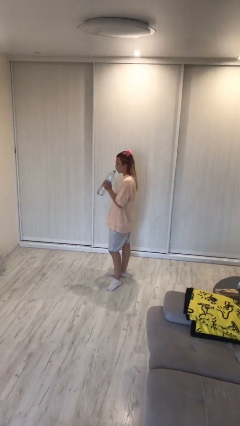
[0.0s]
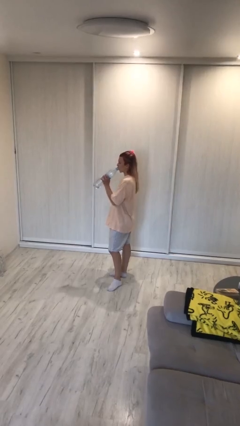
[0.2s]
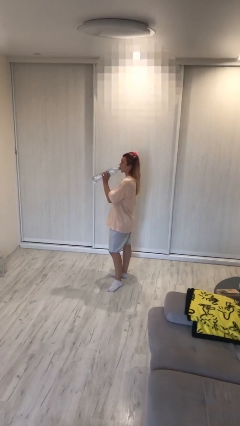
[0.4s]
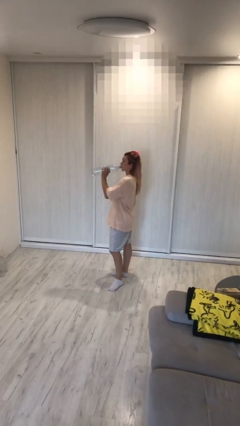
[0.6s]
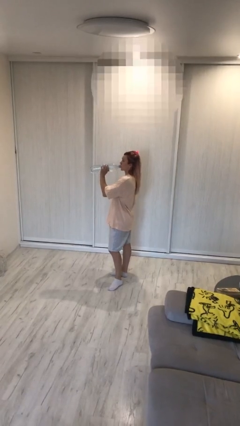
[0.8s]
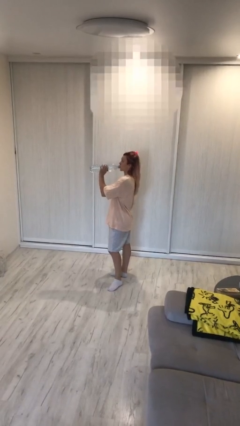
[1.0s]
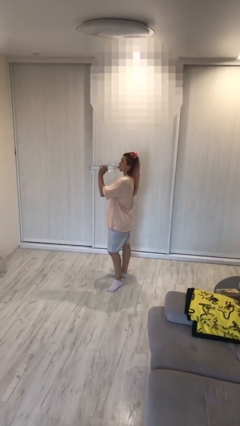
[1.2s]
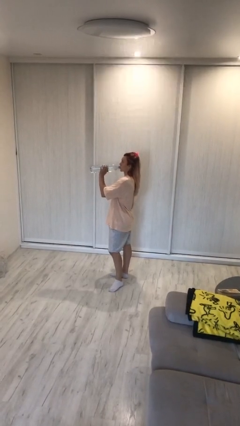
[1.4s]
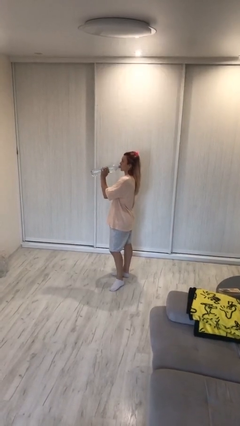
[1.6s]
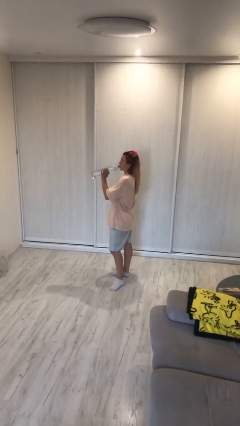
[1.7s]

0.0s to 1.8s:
person drinks from bottle

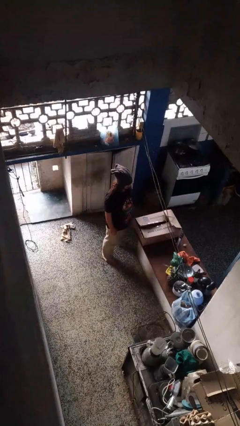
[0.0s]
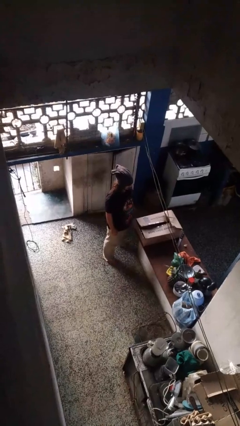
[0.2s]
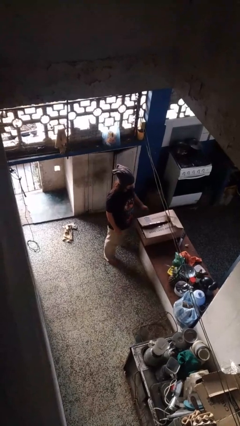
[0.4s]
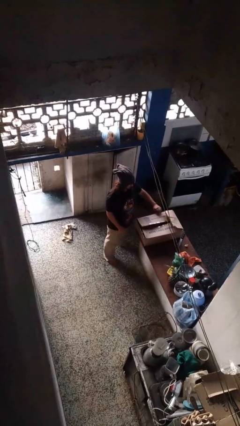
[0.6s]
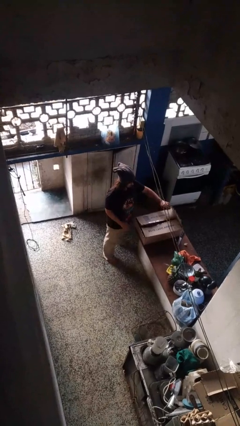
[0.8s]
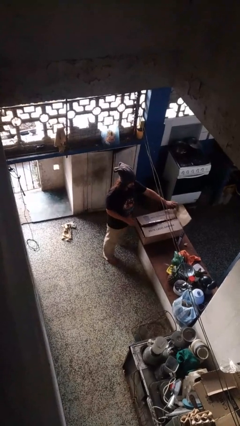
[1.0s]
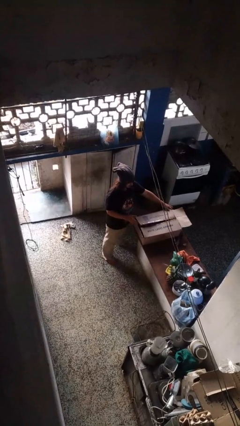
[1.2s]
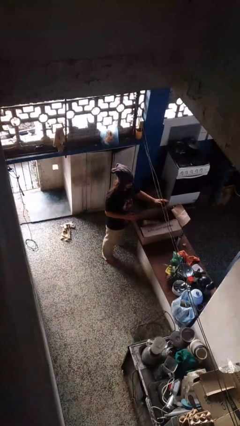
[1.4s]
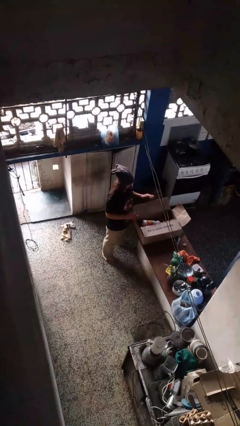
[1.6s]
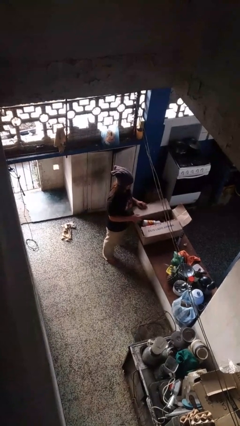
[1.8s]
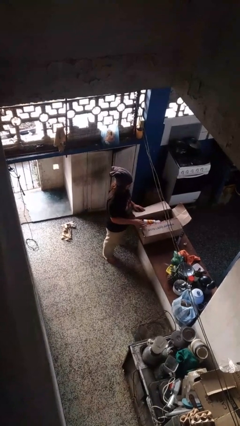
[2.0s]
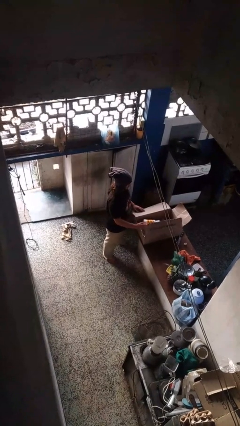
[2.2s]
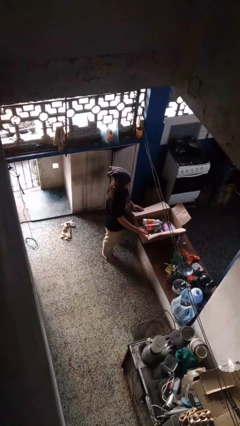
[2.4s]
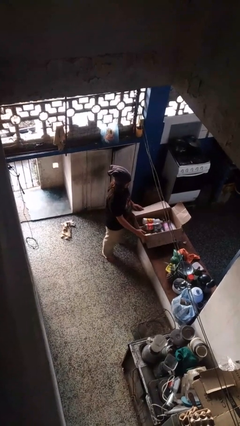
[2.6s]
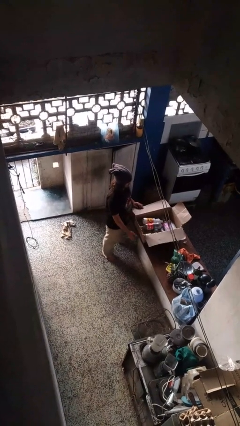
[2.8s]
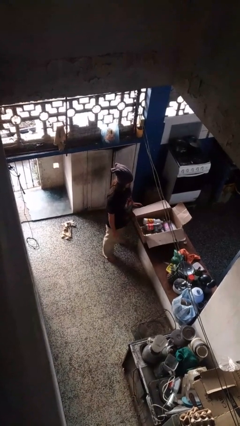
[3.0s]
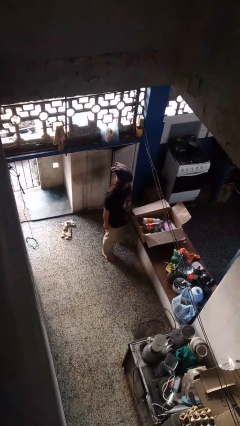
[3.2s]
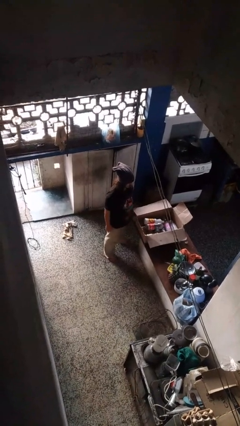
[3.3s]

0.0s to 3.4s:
person opens box

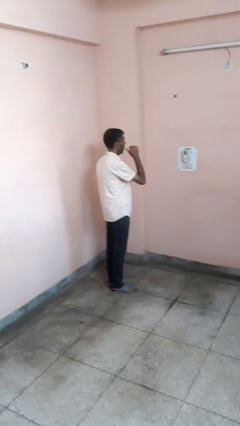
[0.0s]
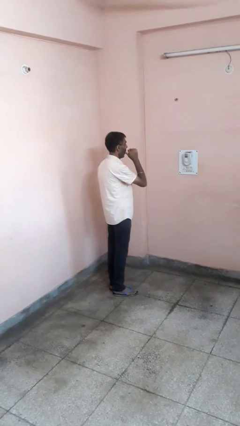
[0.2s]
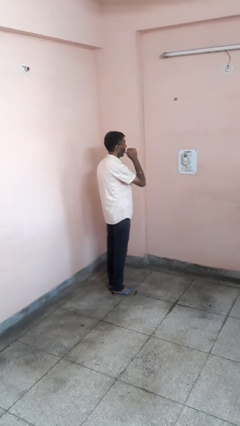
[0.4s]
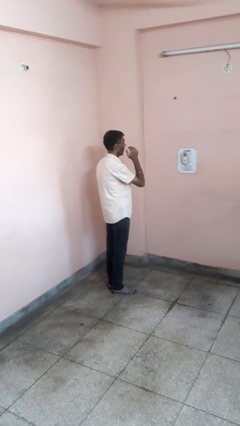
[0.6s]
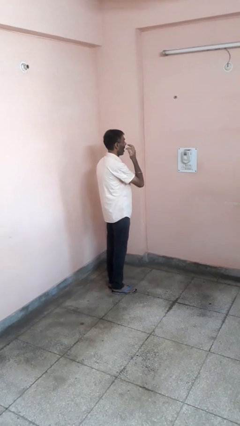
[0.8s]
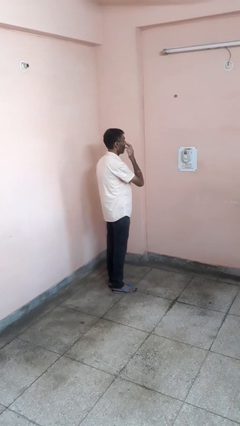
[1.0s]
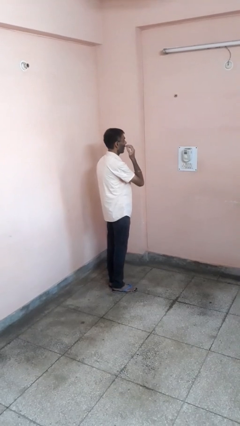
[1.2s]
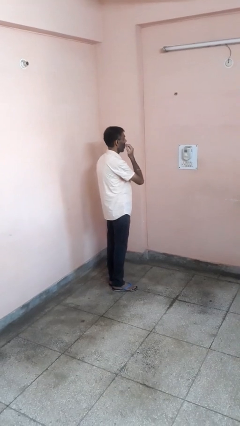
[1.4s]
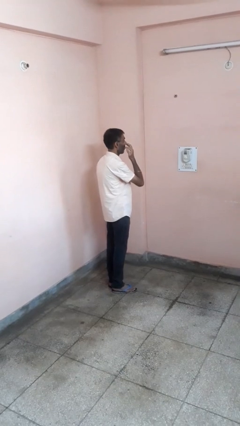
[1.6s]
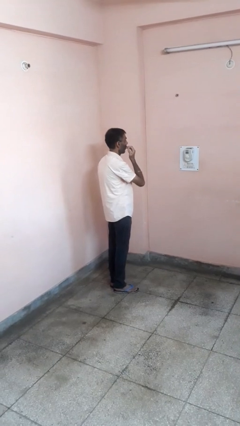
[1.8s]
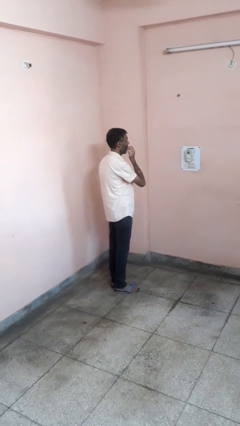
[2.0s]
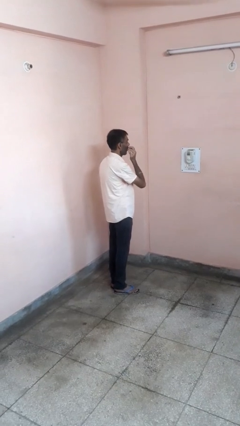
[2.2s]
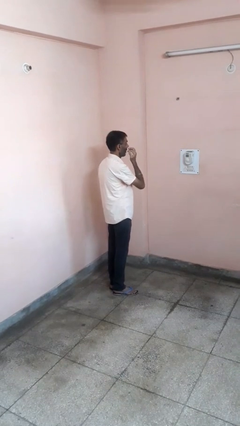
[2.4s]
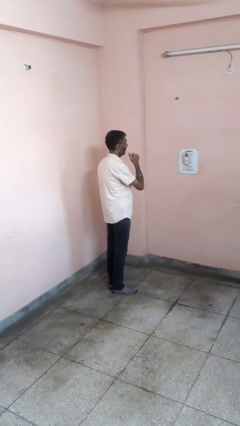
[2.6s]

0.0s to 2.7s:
person licks fingers

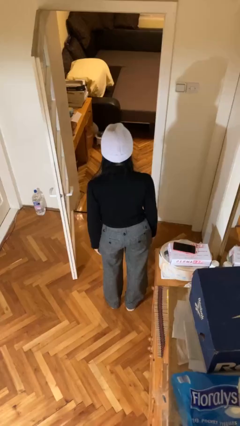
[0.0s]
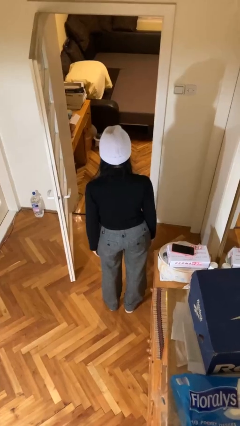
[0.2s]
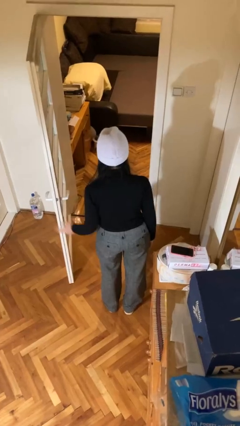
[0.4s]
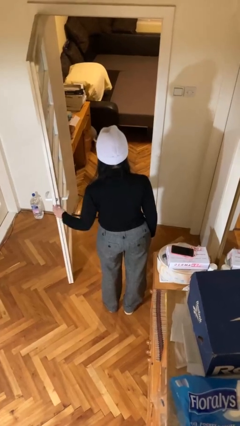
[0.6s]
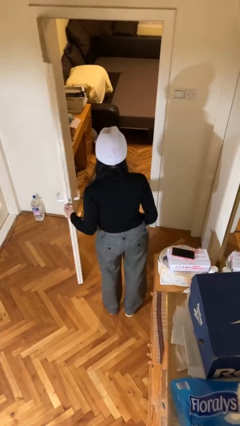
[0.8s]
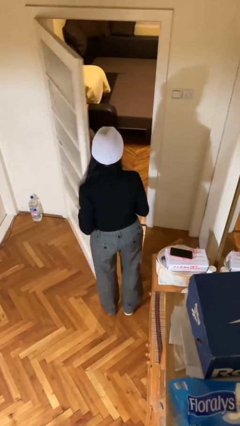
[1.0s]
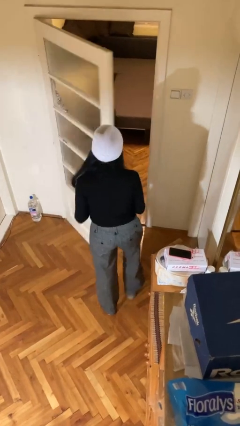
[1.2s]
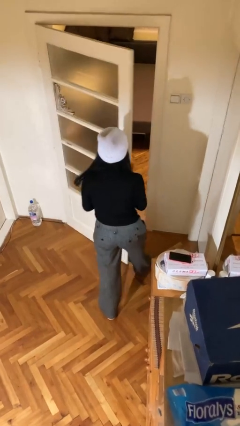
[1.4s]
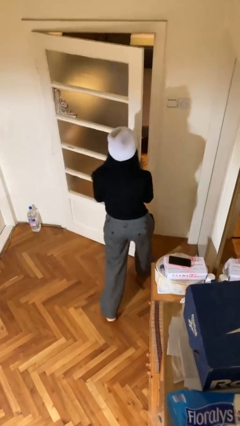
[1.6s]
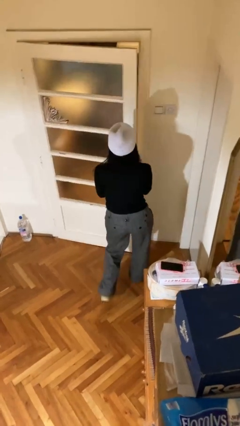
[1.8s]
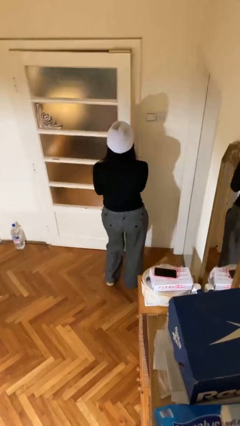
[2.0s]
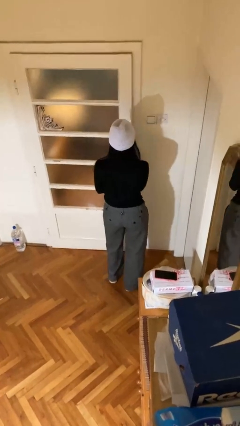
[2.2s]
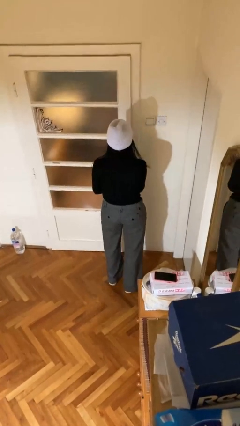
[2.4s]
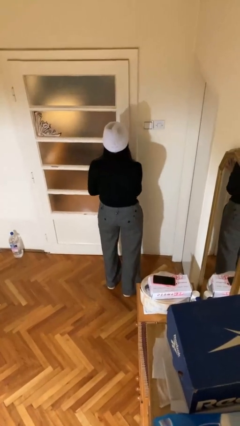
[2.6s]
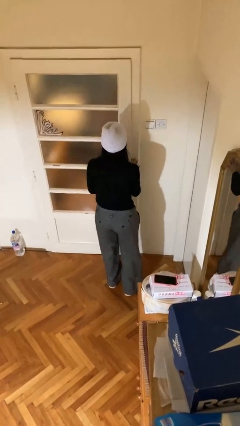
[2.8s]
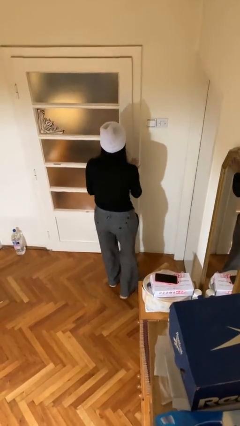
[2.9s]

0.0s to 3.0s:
person closes facility door

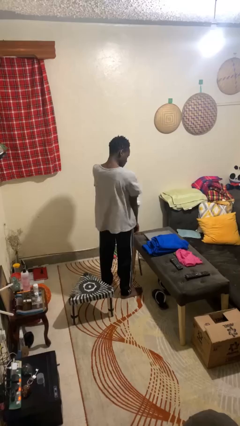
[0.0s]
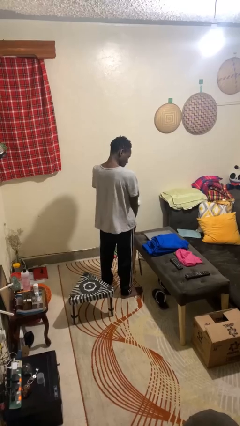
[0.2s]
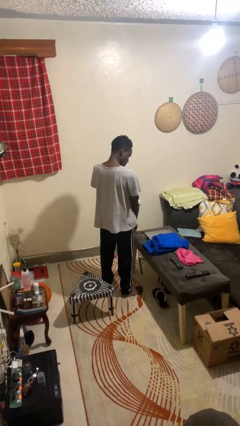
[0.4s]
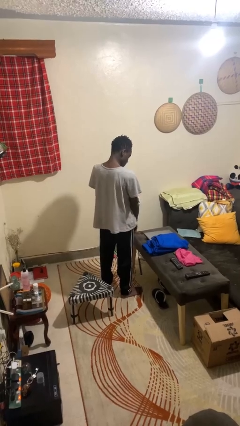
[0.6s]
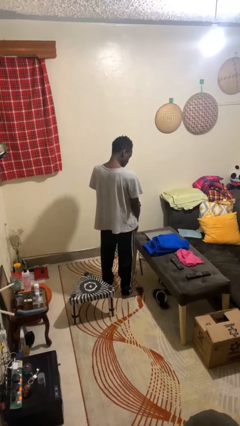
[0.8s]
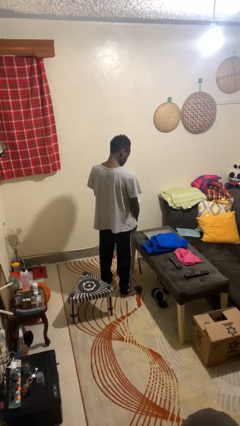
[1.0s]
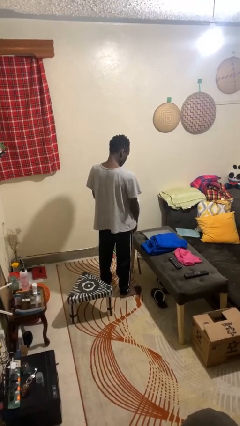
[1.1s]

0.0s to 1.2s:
person swats bug

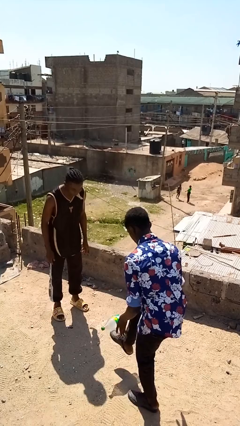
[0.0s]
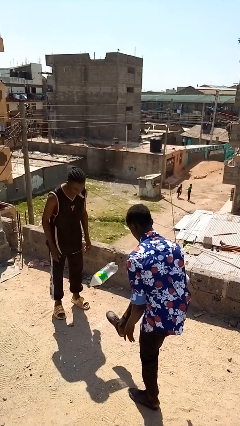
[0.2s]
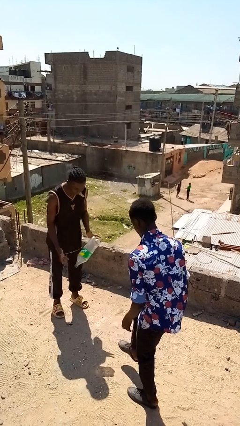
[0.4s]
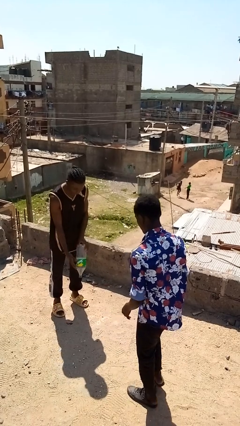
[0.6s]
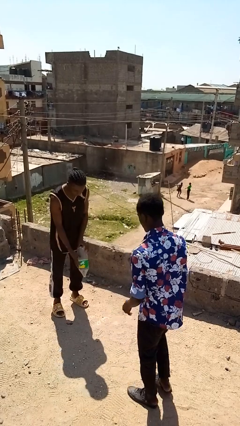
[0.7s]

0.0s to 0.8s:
person kicks object to person

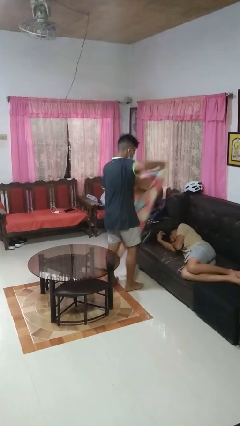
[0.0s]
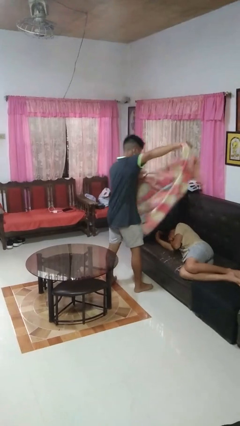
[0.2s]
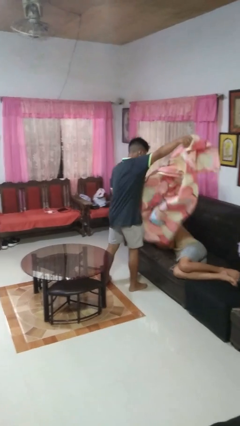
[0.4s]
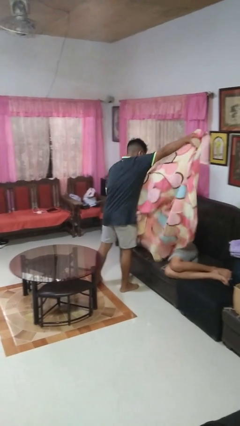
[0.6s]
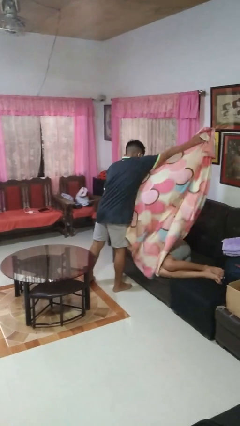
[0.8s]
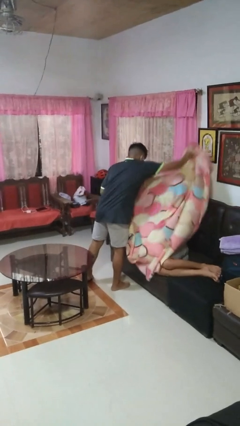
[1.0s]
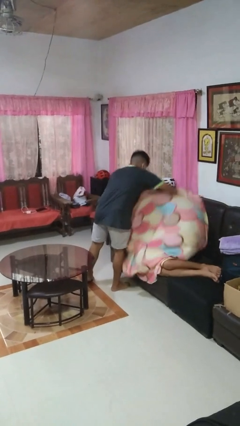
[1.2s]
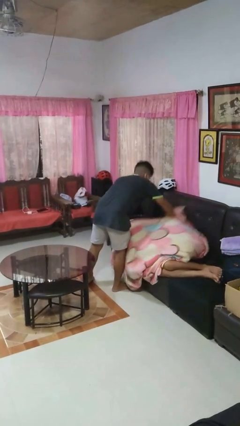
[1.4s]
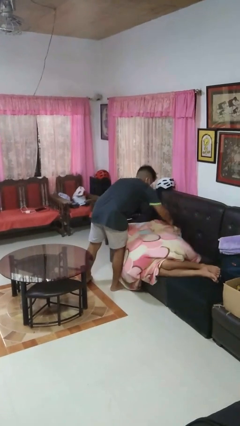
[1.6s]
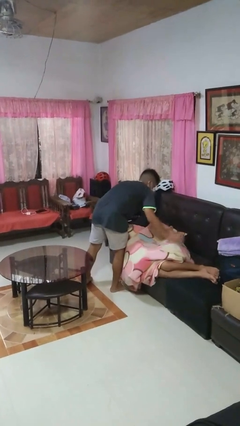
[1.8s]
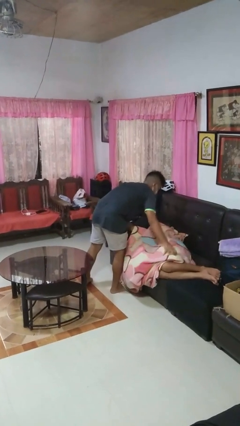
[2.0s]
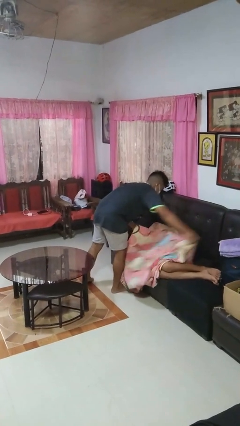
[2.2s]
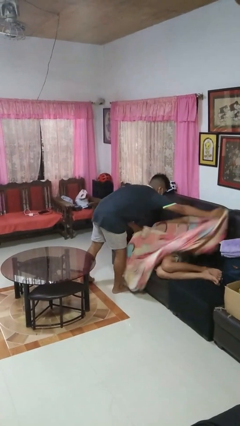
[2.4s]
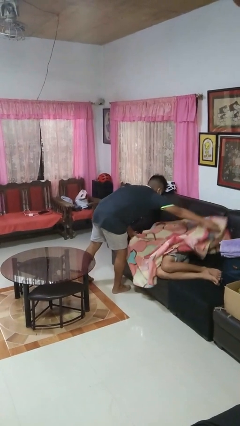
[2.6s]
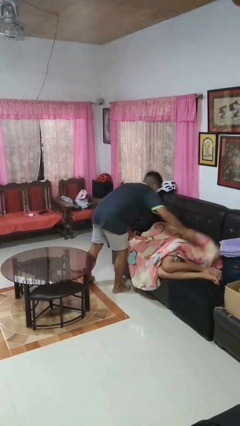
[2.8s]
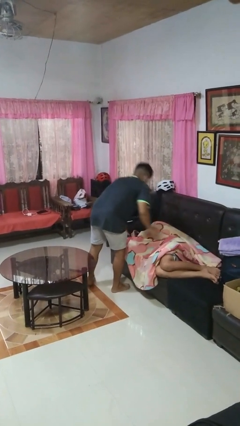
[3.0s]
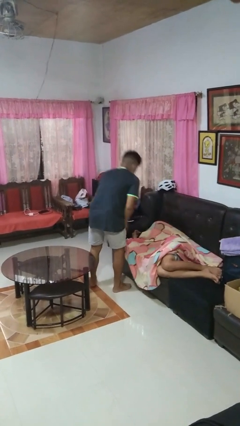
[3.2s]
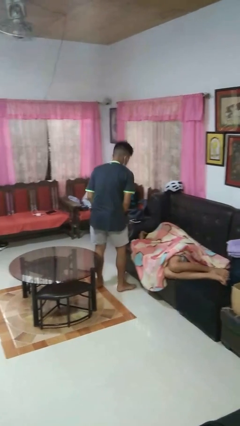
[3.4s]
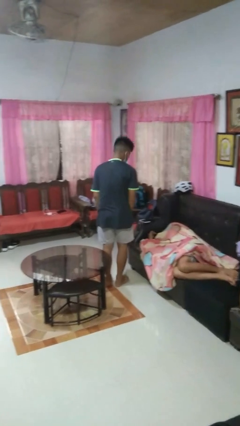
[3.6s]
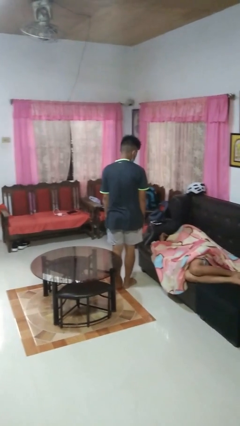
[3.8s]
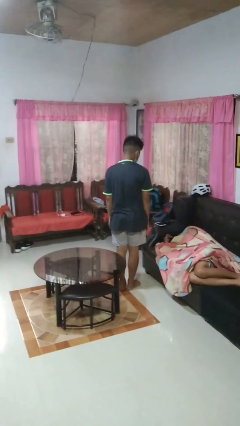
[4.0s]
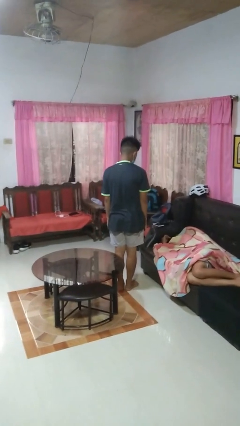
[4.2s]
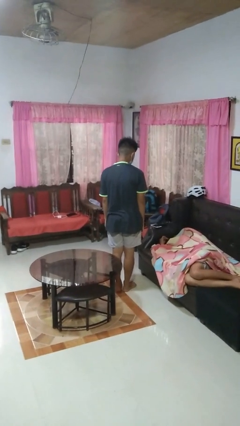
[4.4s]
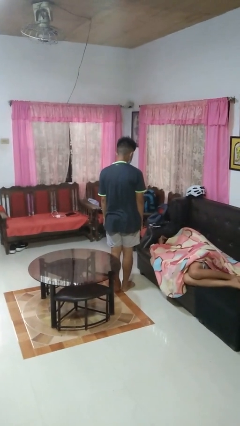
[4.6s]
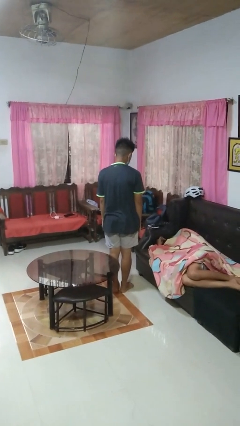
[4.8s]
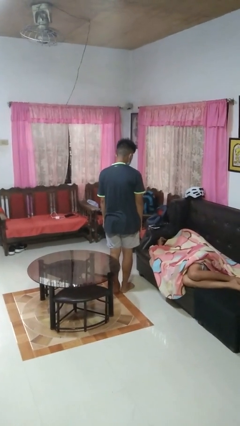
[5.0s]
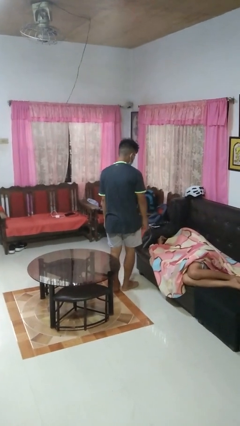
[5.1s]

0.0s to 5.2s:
person covers friend with blanket
